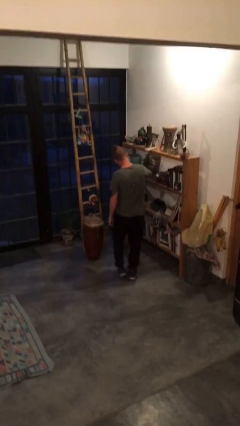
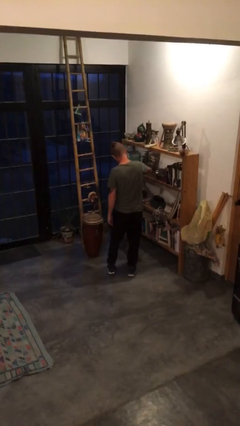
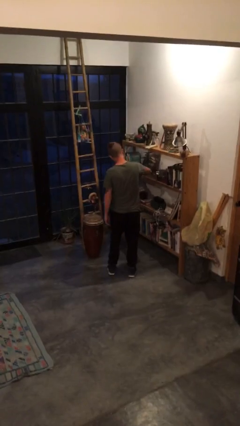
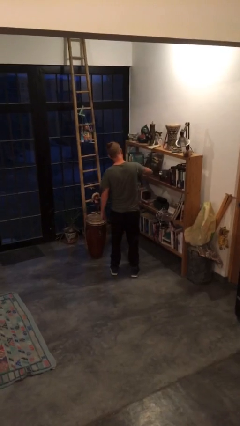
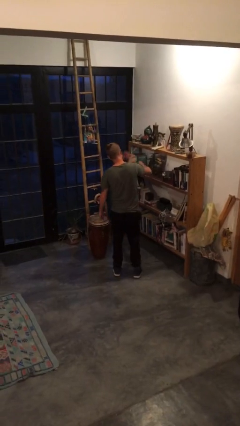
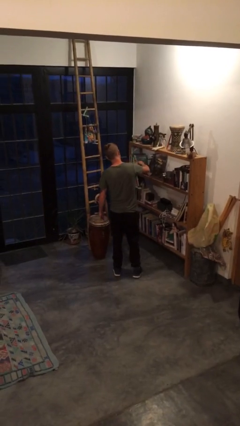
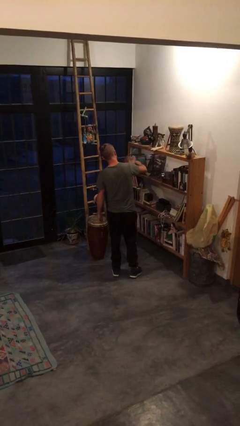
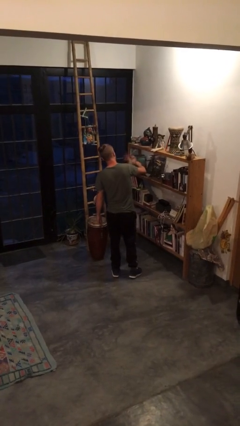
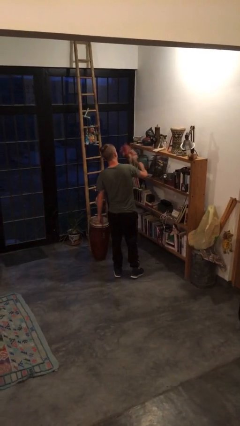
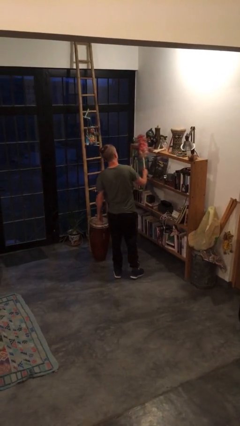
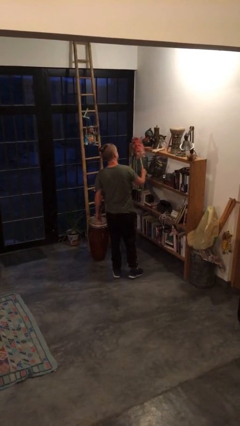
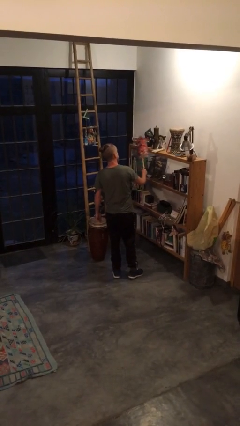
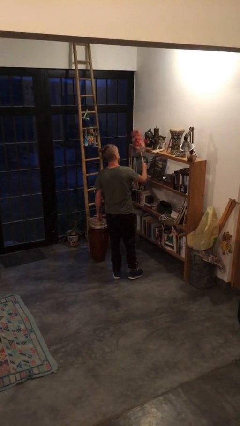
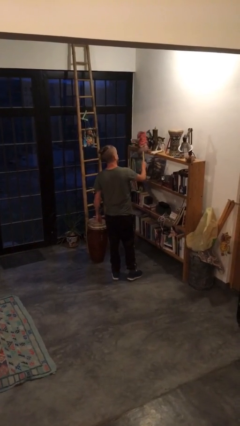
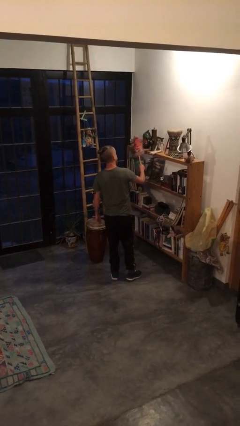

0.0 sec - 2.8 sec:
person dusts furniture

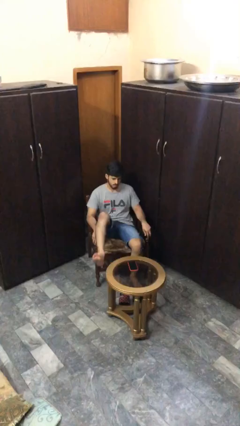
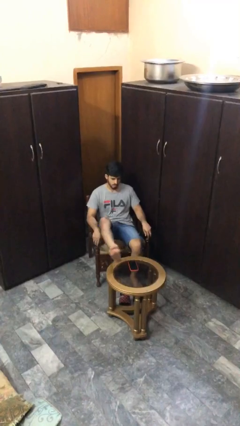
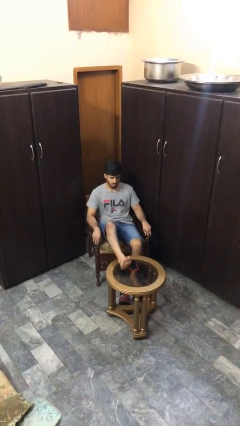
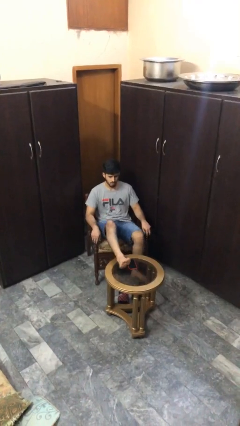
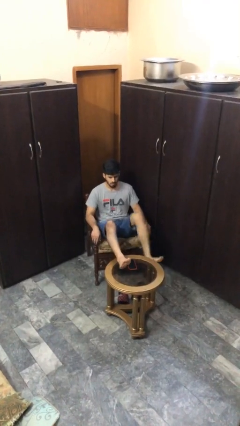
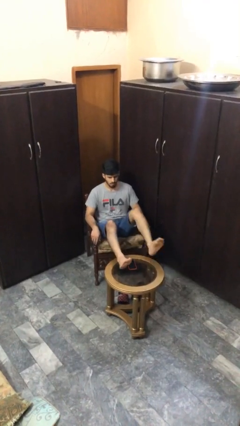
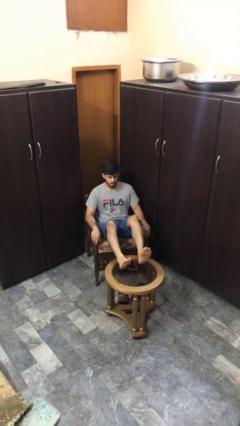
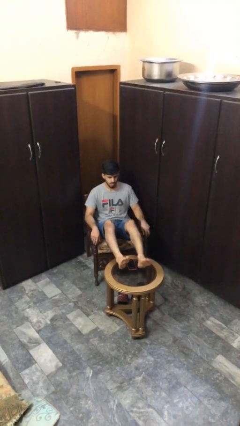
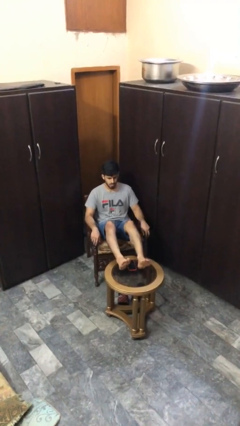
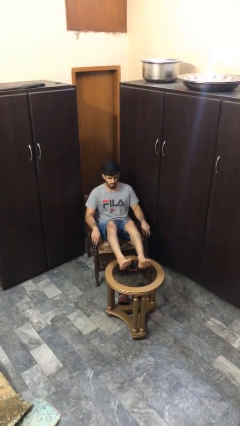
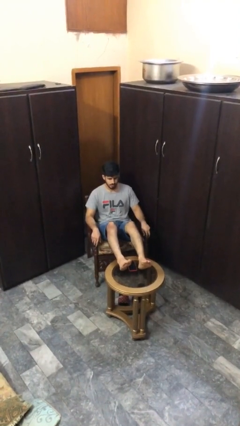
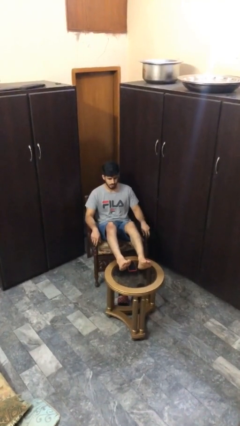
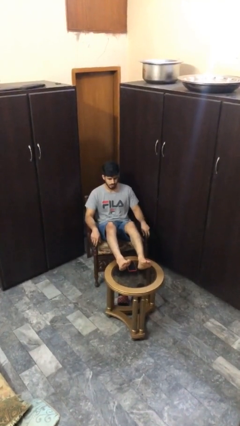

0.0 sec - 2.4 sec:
person puts feet up

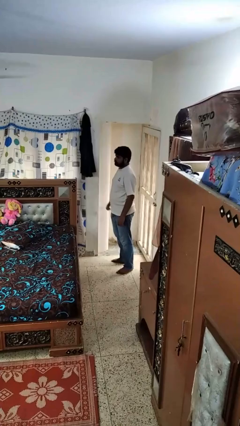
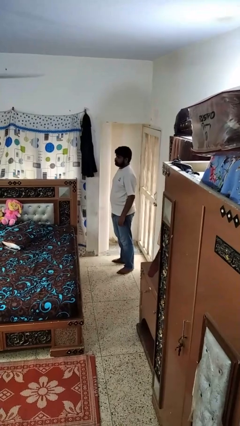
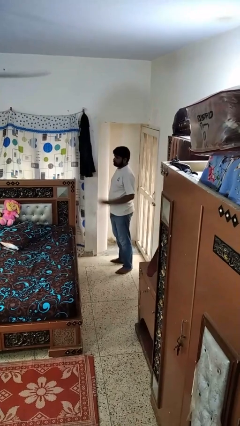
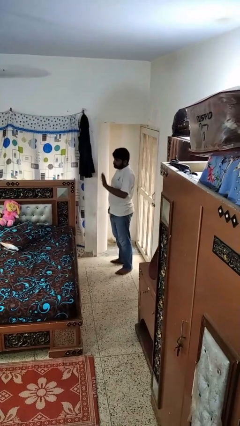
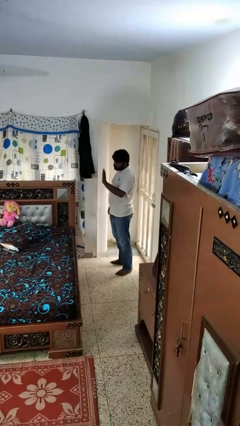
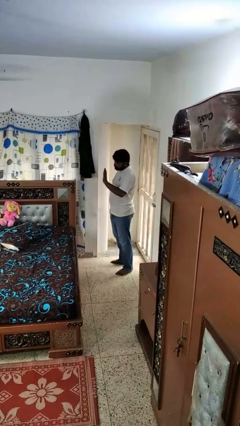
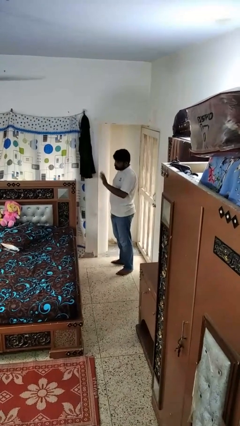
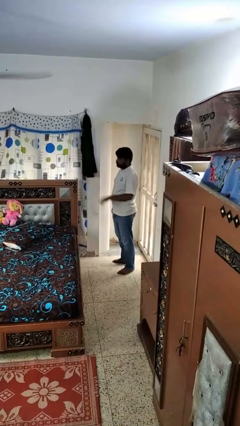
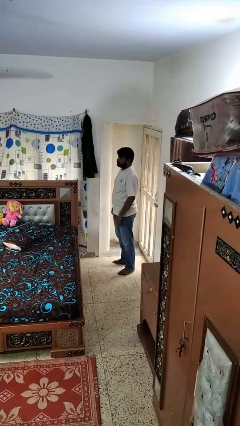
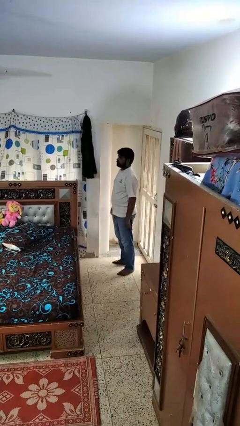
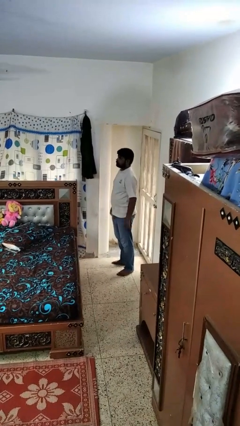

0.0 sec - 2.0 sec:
person waves at person

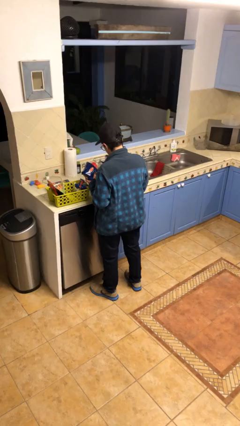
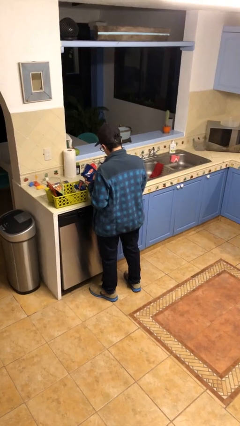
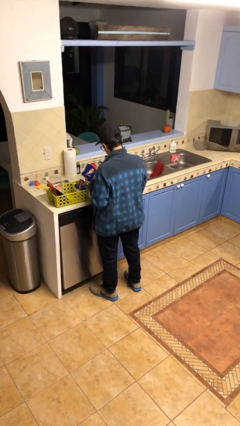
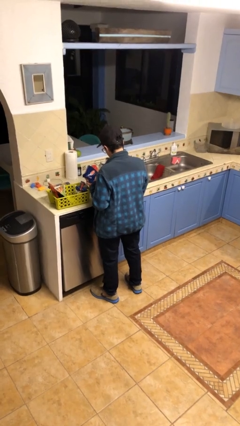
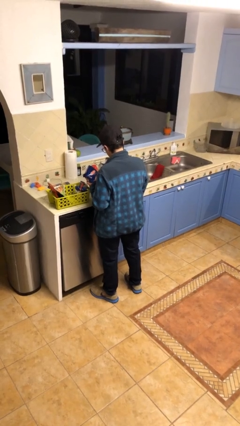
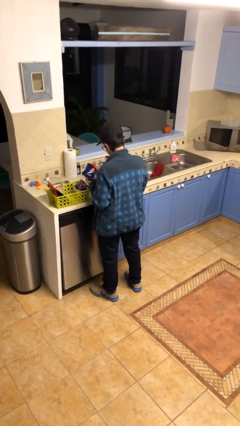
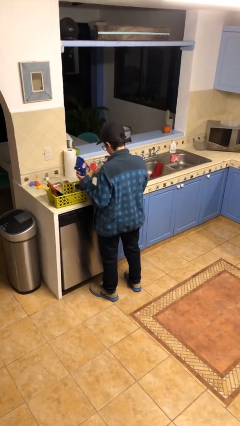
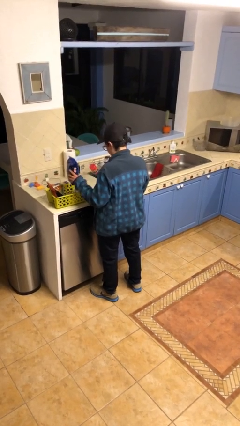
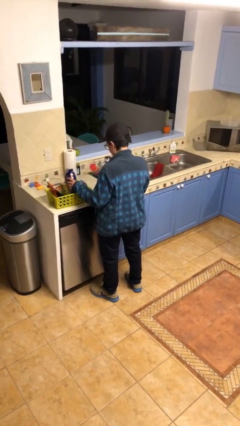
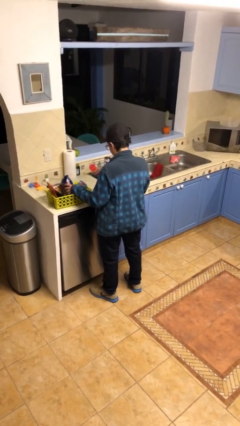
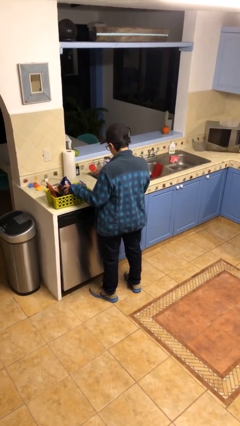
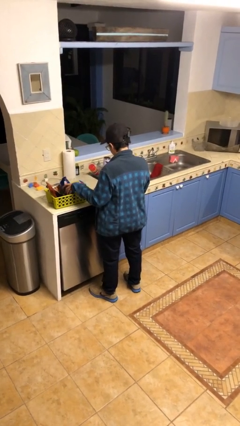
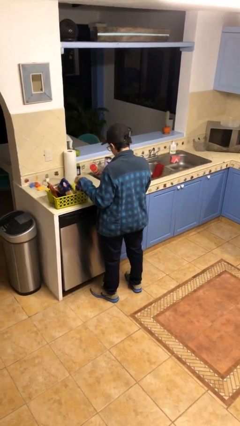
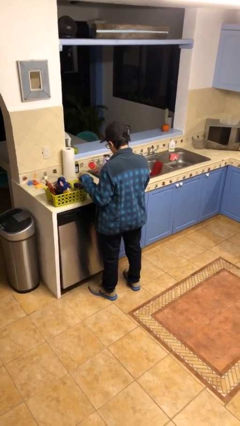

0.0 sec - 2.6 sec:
person puts object into basket

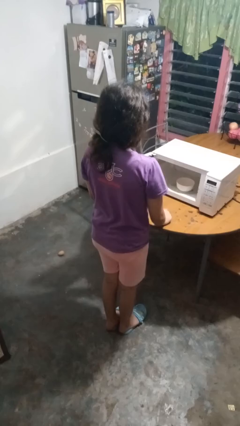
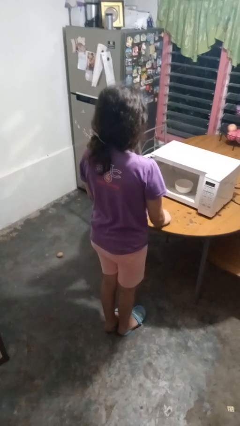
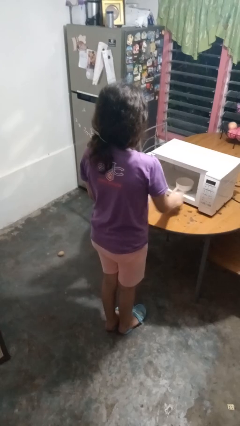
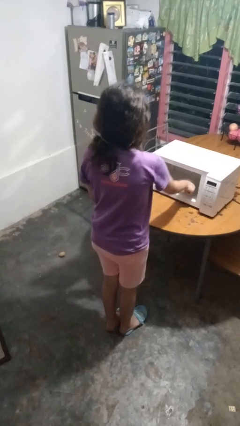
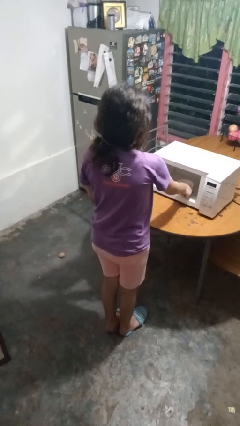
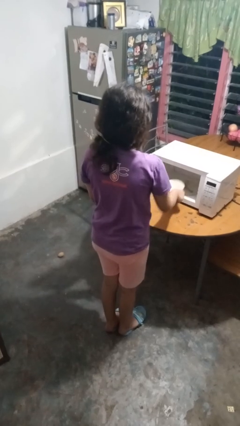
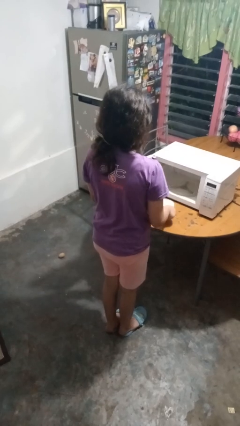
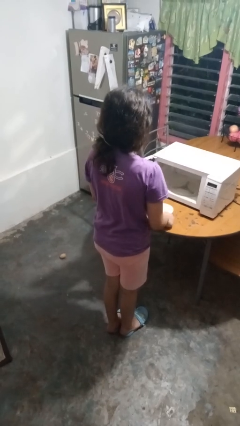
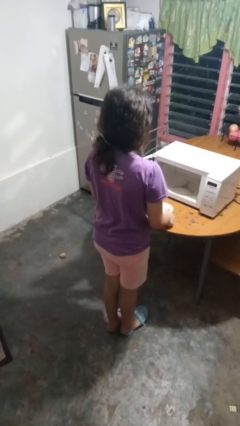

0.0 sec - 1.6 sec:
person takes object from microwave

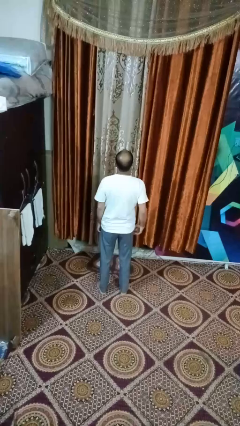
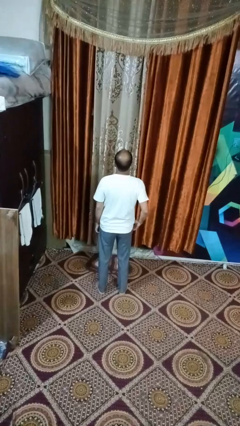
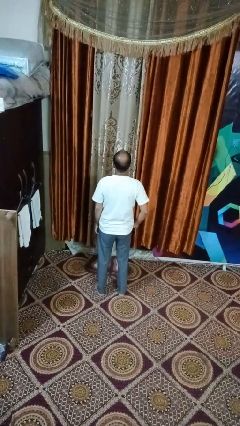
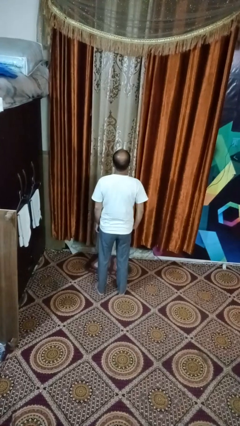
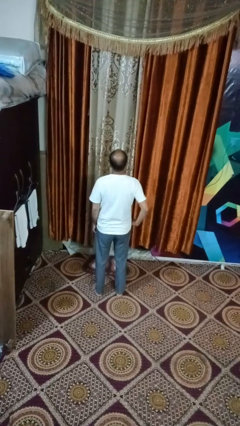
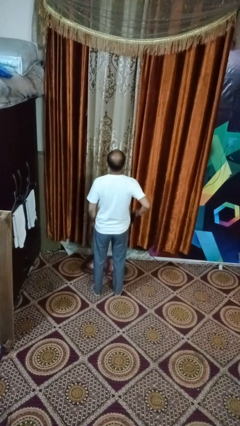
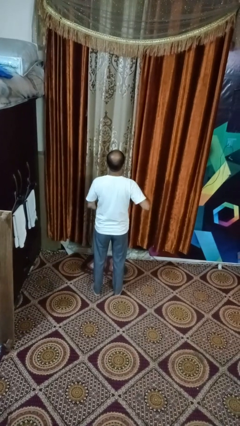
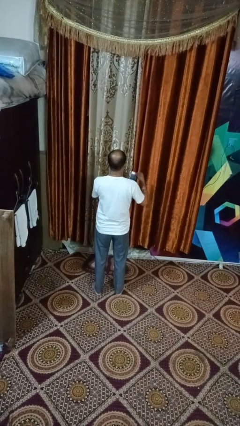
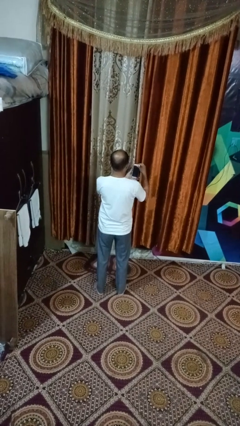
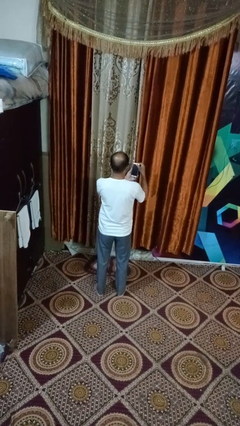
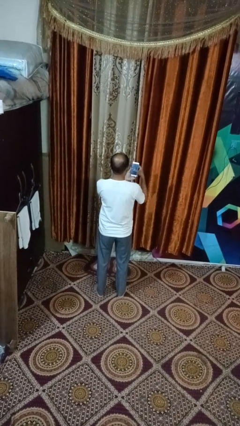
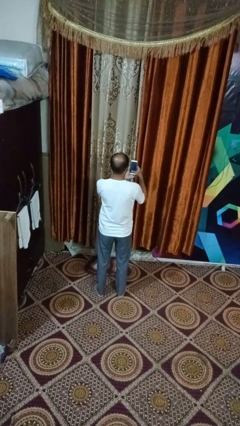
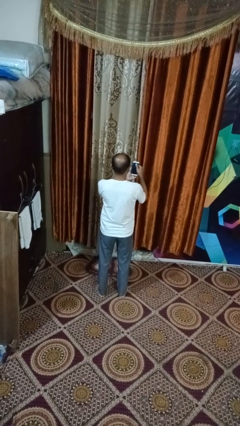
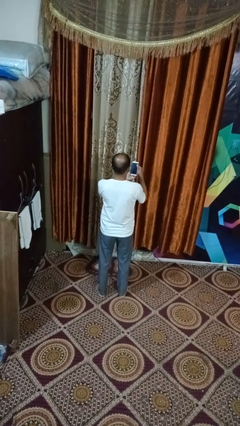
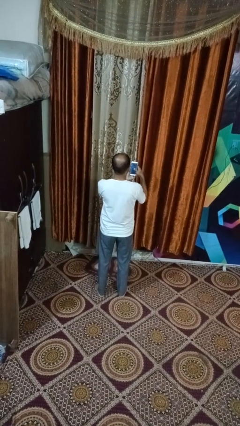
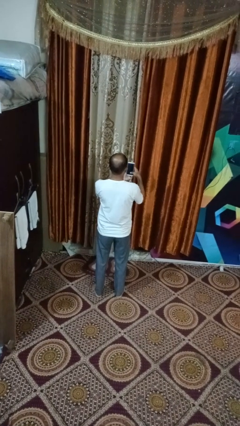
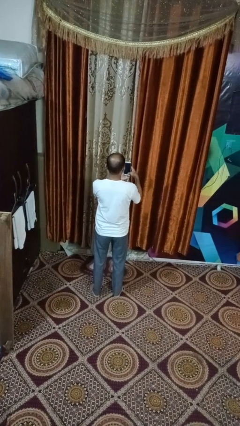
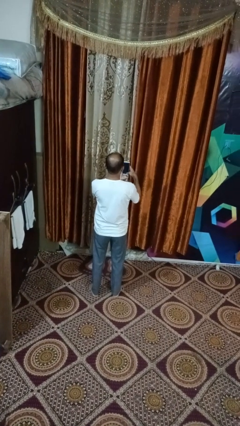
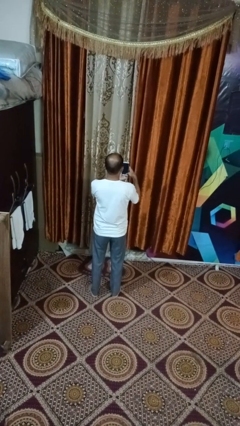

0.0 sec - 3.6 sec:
person takes phone from pocket

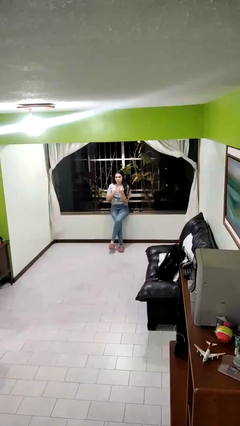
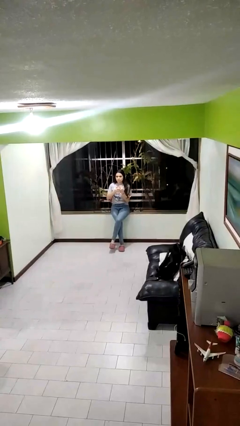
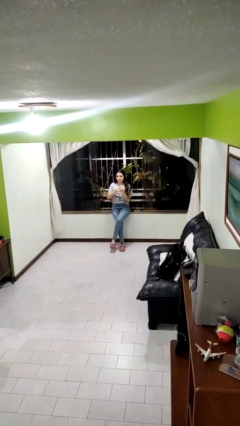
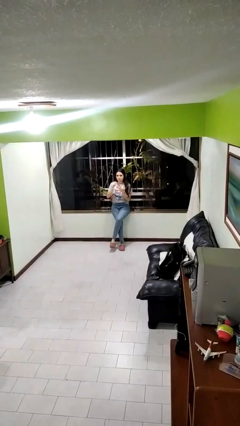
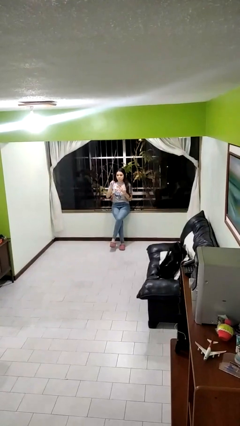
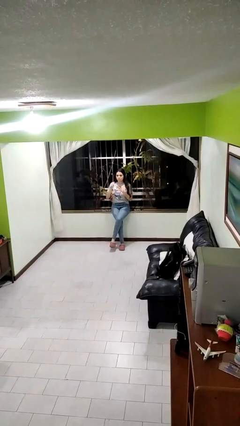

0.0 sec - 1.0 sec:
person takes off ring

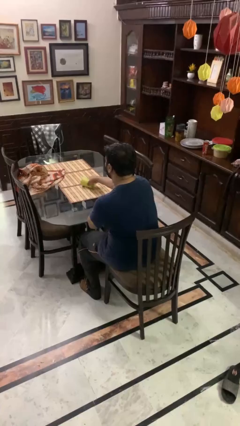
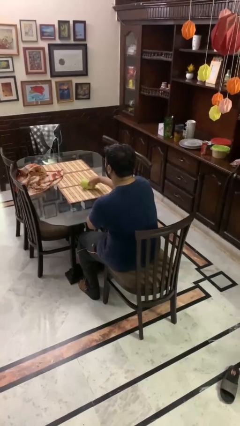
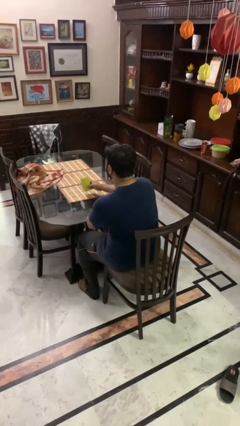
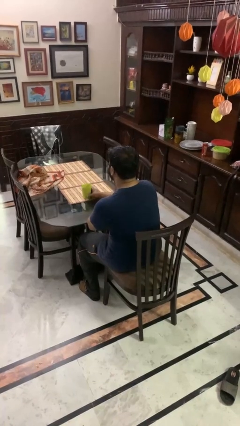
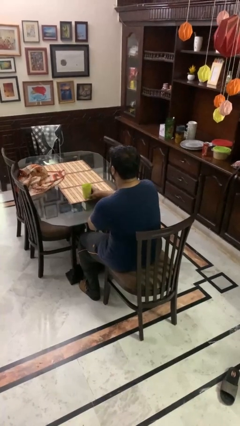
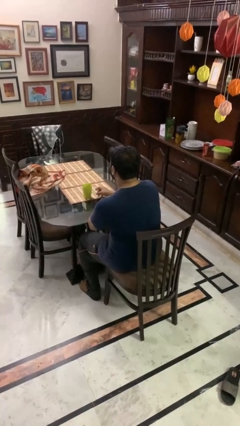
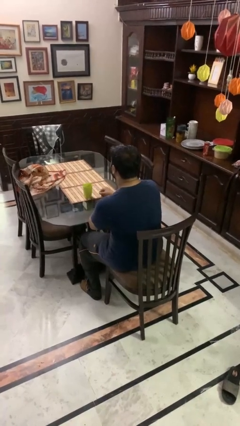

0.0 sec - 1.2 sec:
person sets upright glass
